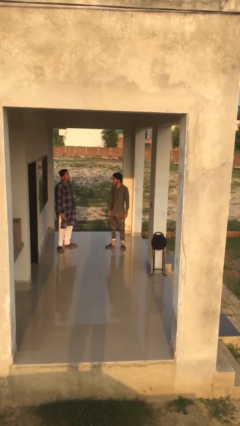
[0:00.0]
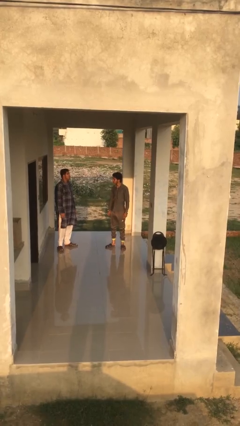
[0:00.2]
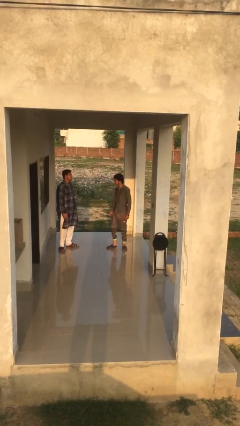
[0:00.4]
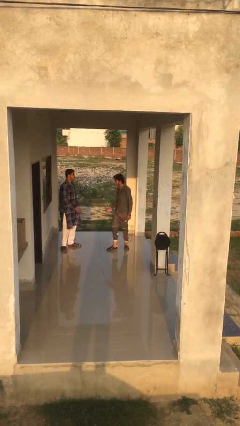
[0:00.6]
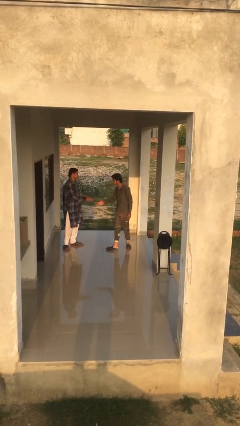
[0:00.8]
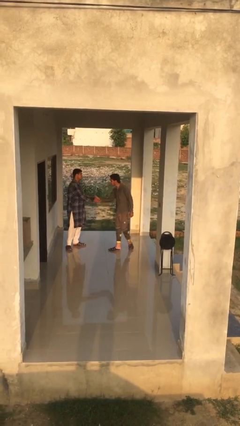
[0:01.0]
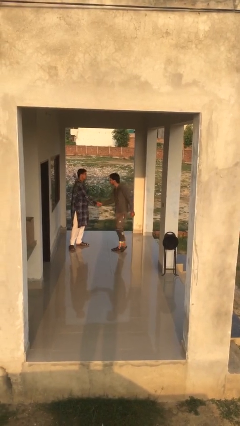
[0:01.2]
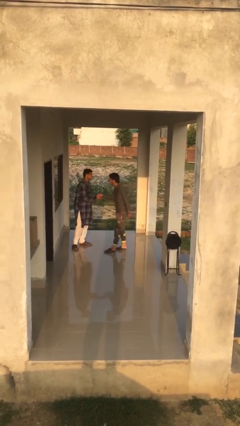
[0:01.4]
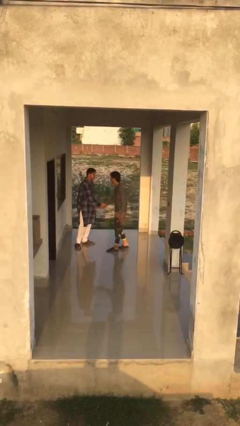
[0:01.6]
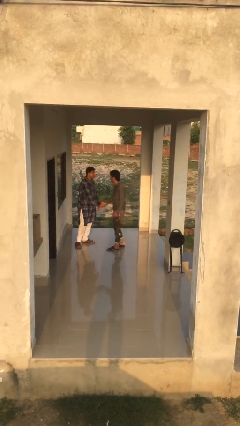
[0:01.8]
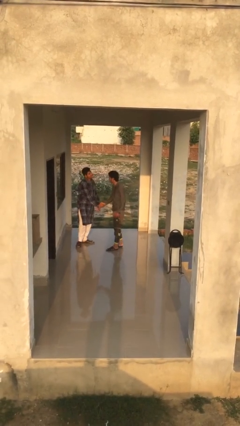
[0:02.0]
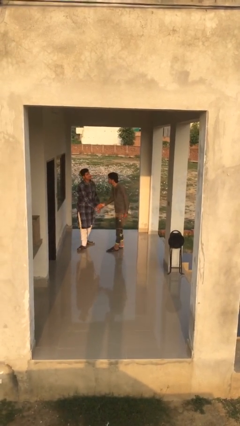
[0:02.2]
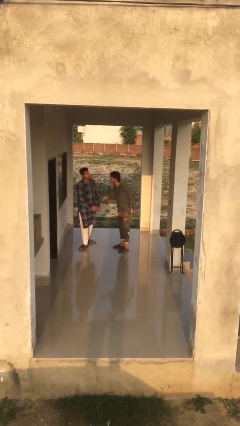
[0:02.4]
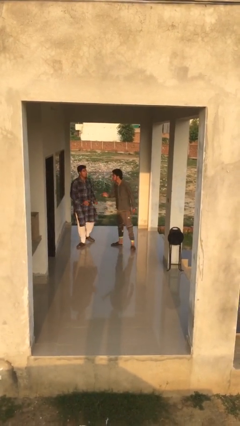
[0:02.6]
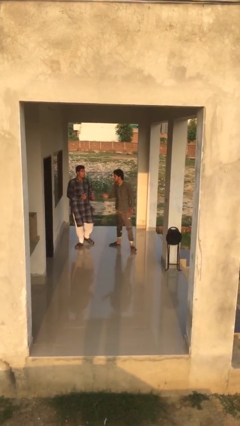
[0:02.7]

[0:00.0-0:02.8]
person shakes hand

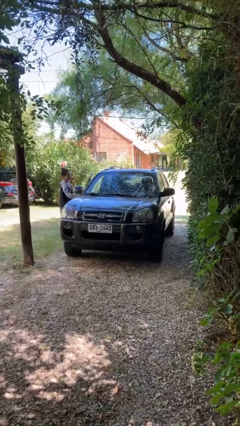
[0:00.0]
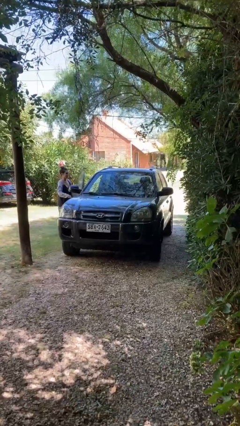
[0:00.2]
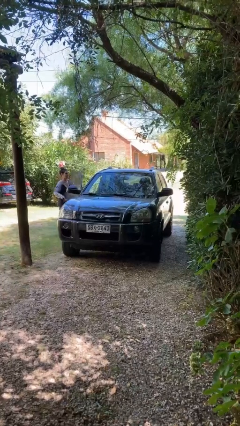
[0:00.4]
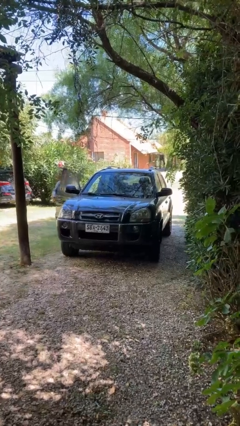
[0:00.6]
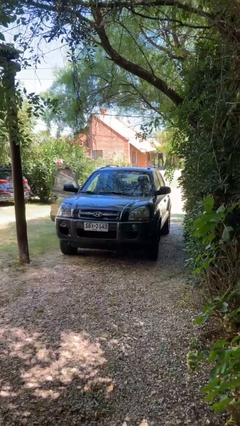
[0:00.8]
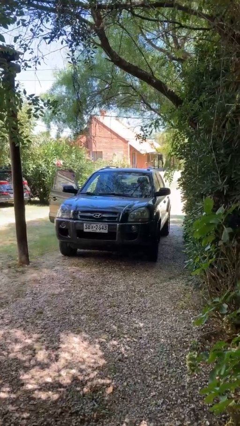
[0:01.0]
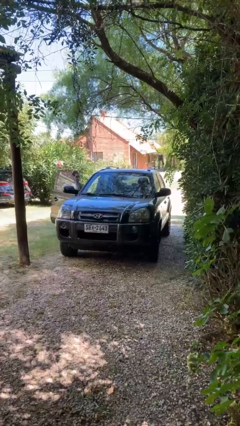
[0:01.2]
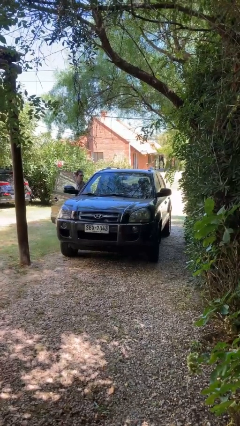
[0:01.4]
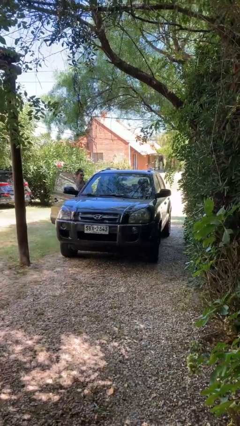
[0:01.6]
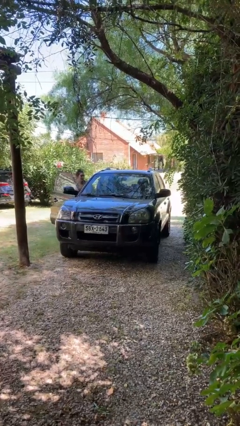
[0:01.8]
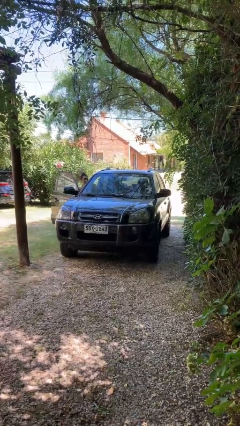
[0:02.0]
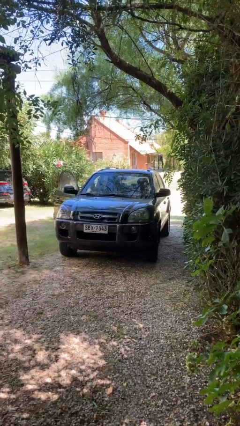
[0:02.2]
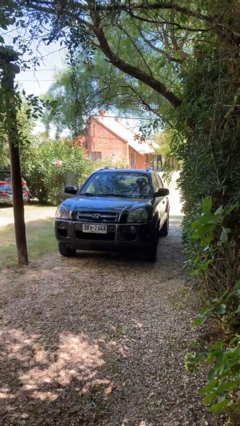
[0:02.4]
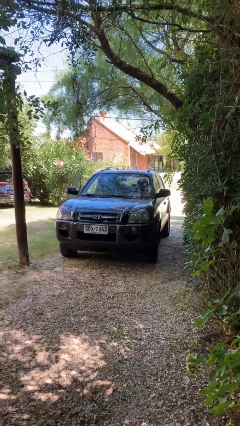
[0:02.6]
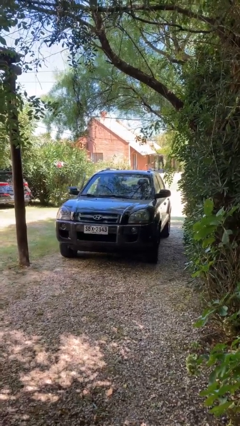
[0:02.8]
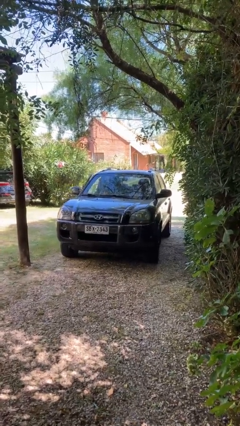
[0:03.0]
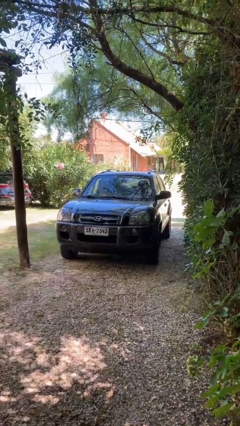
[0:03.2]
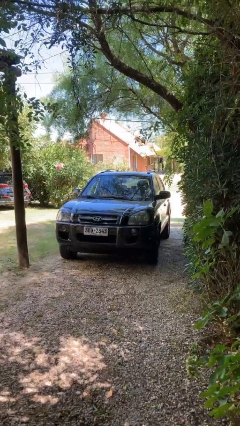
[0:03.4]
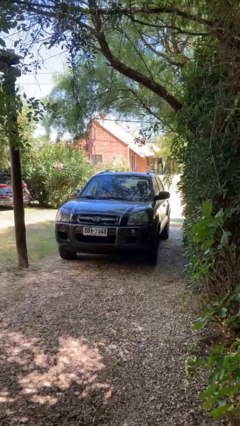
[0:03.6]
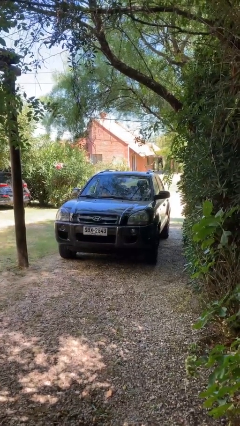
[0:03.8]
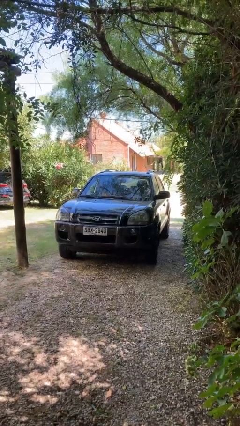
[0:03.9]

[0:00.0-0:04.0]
car picks up person

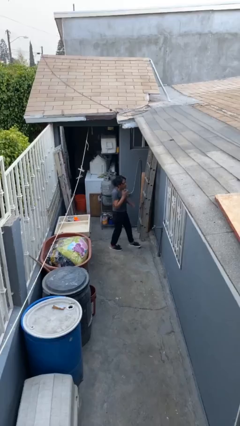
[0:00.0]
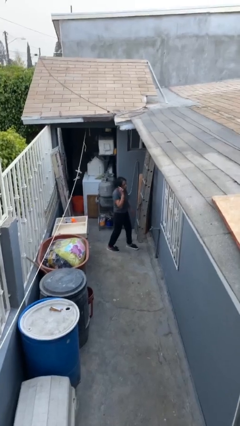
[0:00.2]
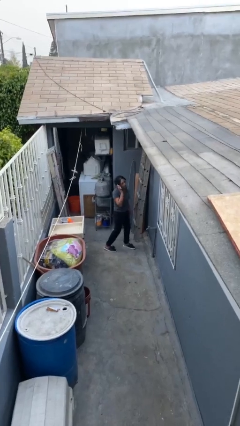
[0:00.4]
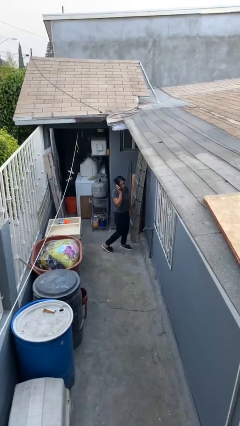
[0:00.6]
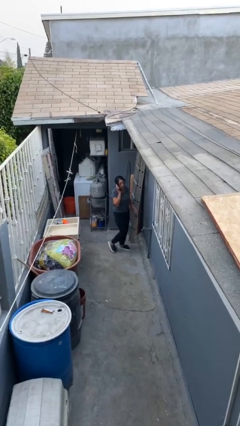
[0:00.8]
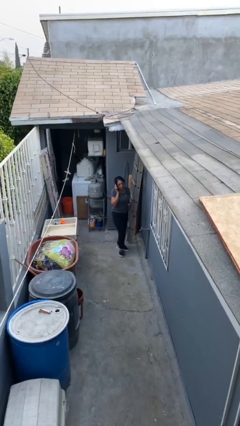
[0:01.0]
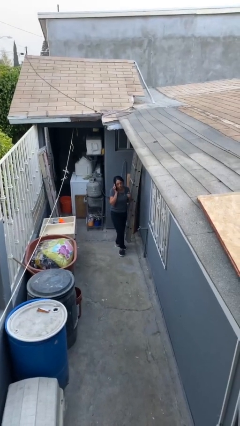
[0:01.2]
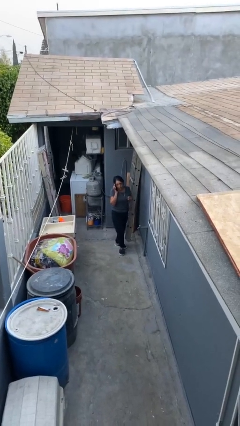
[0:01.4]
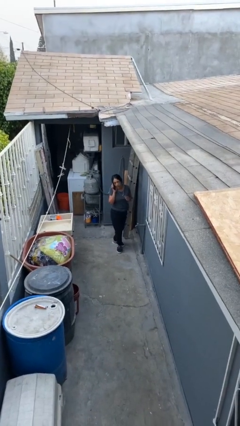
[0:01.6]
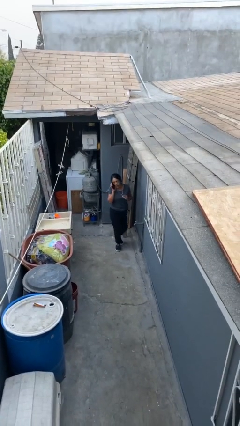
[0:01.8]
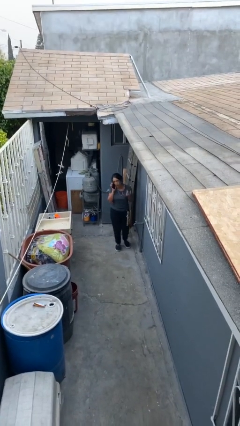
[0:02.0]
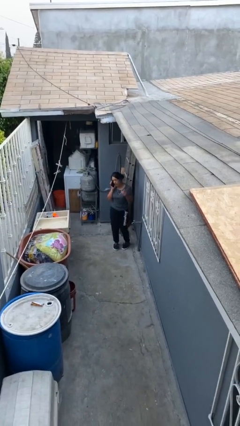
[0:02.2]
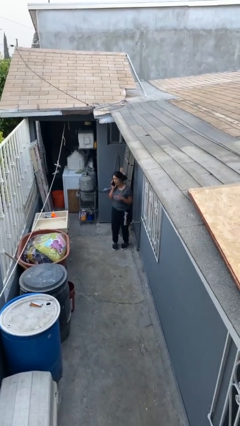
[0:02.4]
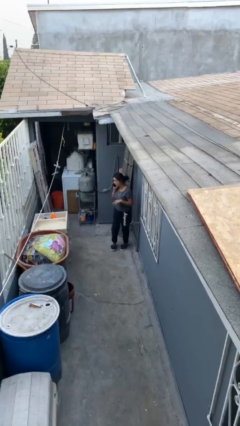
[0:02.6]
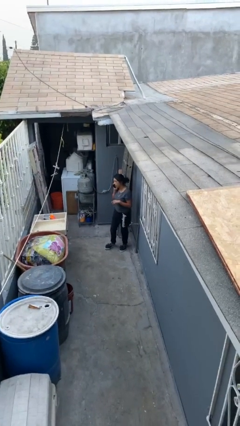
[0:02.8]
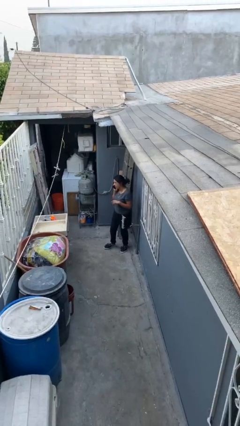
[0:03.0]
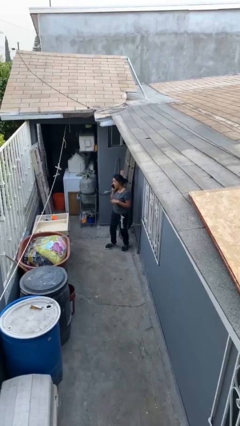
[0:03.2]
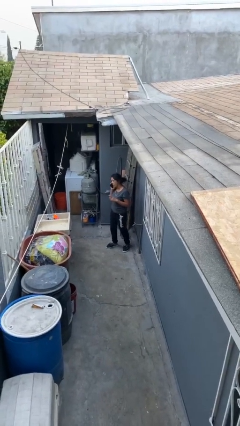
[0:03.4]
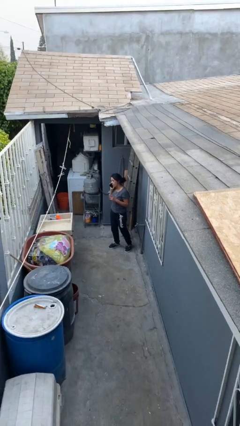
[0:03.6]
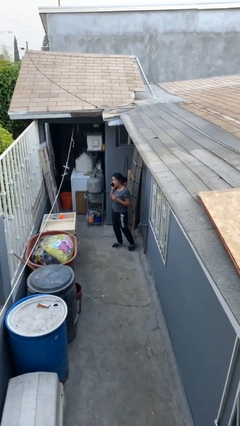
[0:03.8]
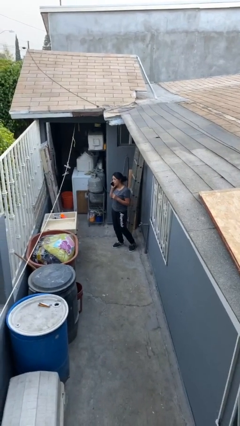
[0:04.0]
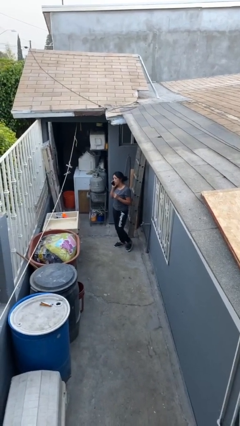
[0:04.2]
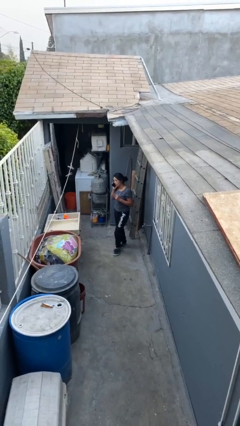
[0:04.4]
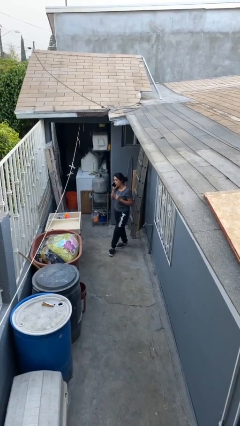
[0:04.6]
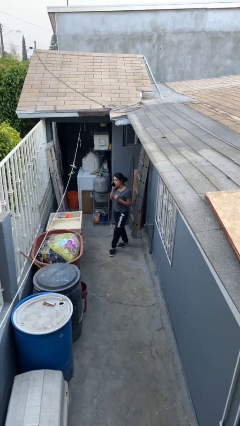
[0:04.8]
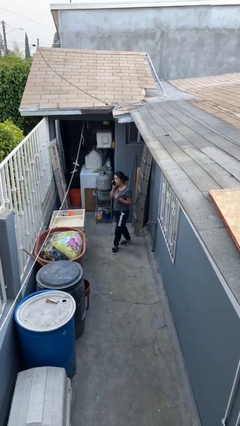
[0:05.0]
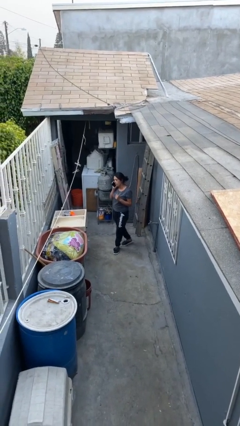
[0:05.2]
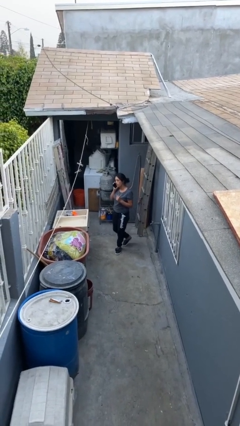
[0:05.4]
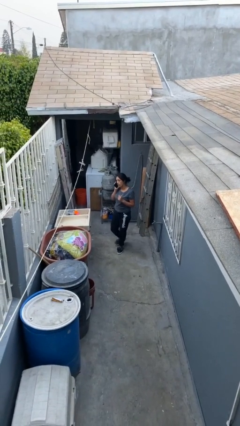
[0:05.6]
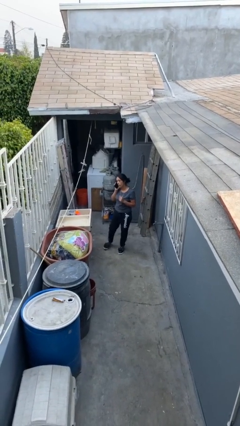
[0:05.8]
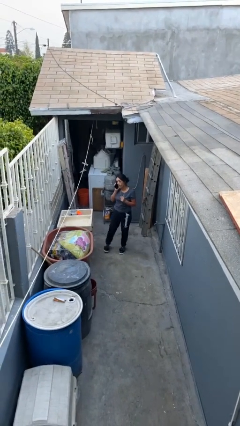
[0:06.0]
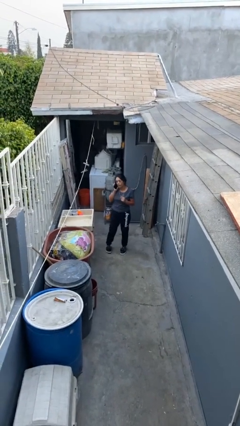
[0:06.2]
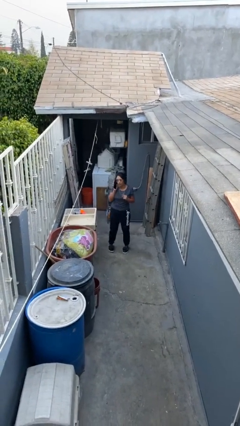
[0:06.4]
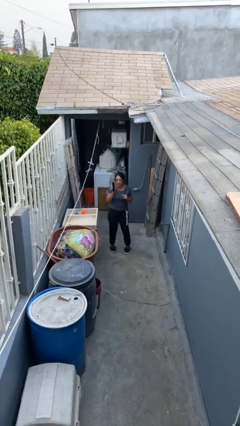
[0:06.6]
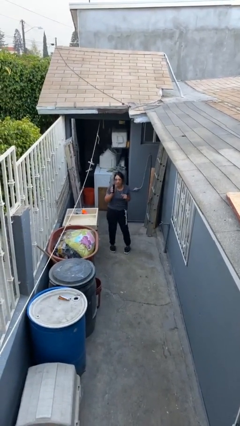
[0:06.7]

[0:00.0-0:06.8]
person talks on phone

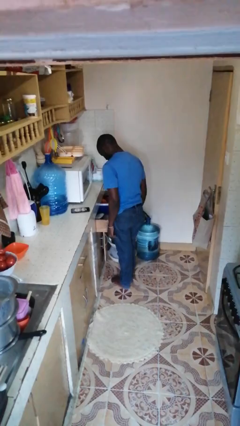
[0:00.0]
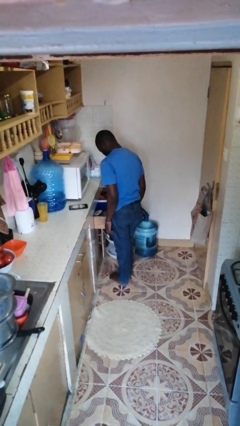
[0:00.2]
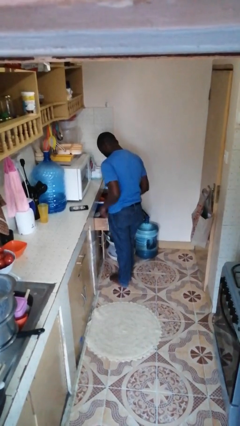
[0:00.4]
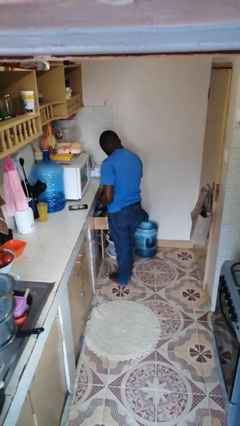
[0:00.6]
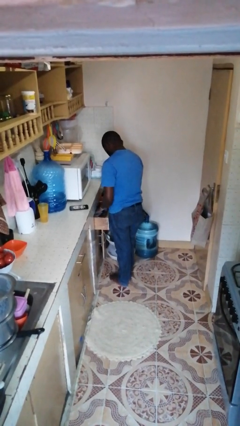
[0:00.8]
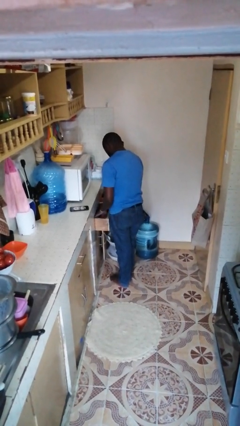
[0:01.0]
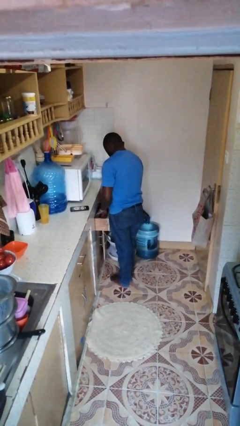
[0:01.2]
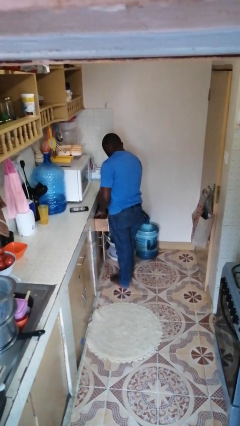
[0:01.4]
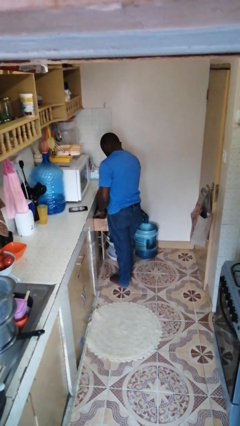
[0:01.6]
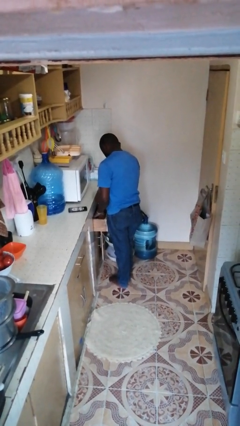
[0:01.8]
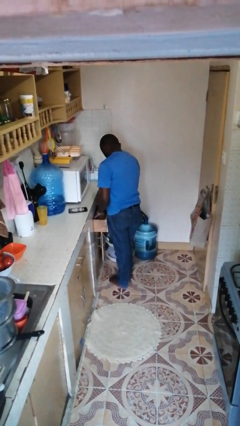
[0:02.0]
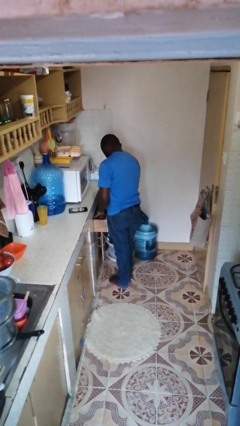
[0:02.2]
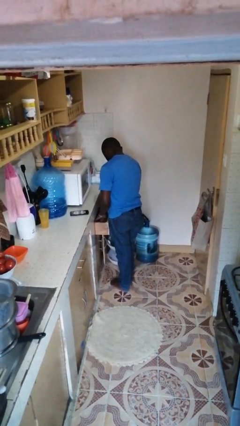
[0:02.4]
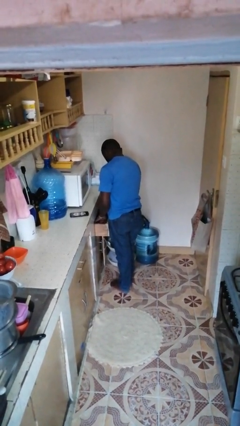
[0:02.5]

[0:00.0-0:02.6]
person searches in kitchen drawer

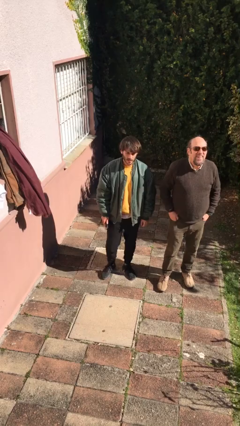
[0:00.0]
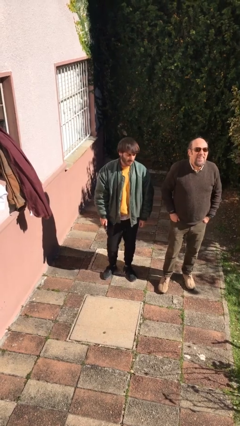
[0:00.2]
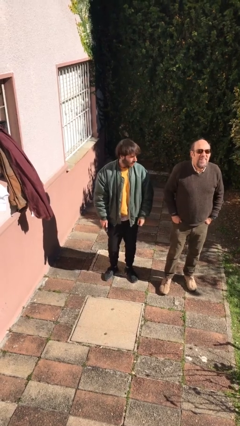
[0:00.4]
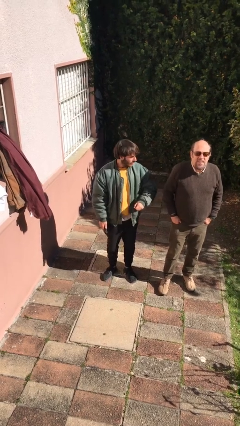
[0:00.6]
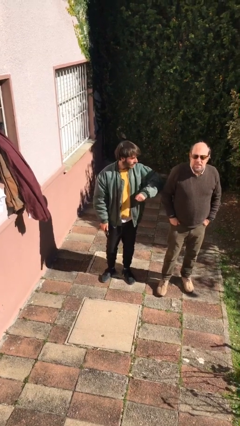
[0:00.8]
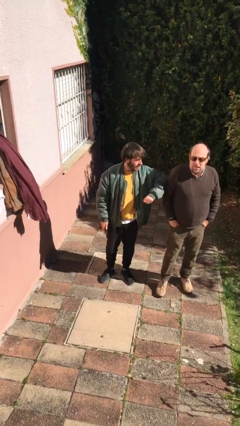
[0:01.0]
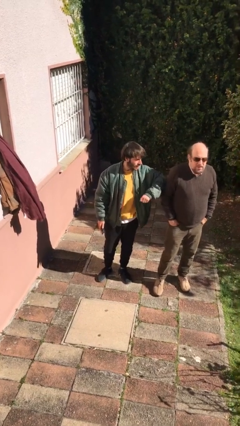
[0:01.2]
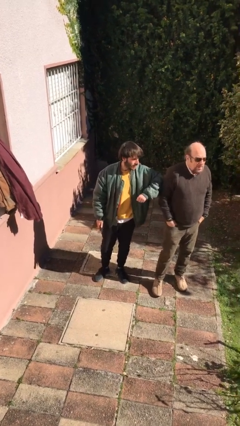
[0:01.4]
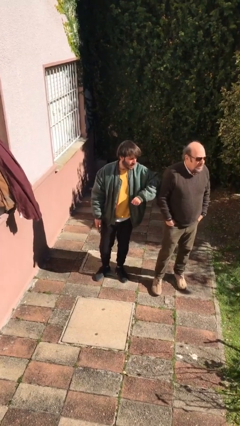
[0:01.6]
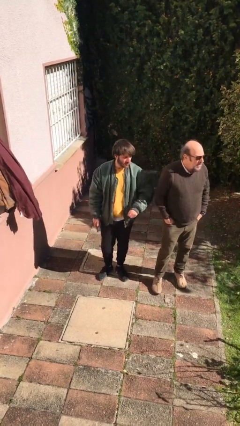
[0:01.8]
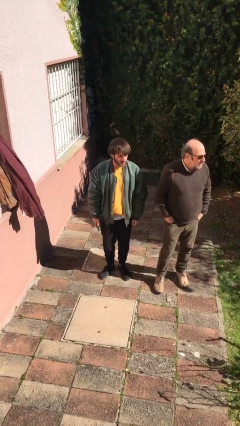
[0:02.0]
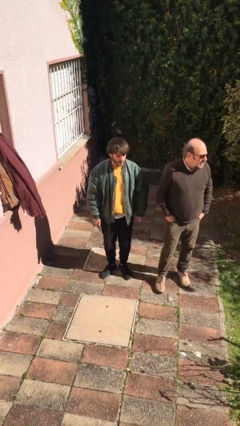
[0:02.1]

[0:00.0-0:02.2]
person nudges person with elbow
